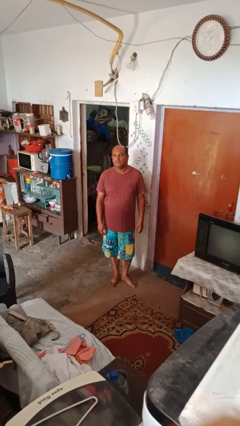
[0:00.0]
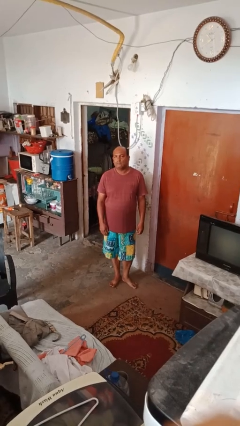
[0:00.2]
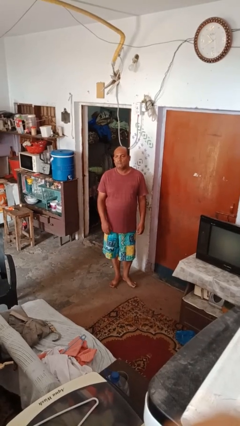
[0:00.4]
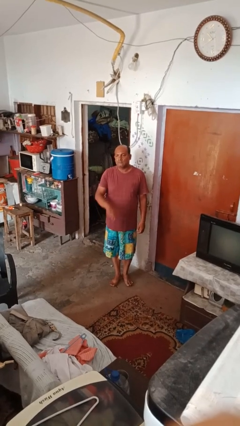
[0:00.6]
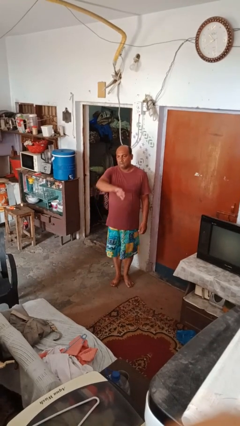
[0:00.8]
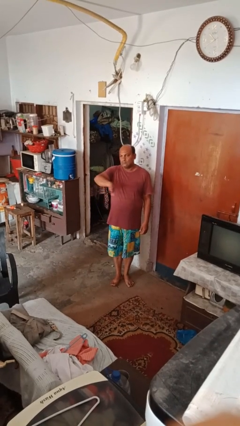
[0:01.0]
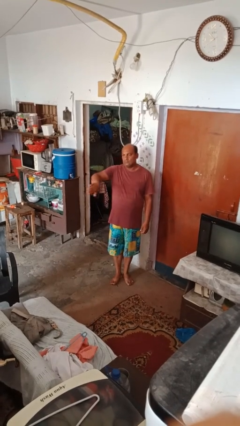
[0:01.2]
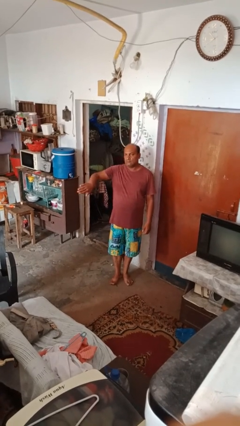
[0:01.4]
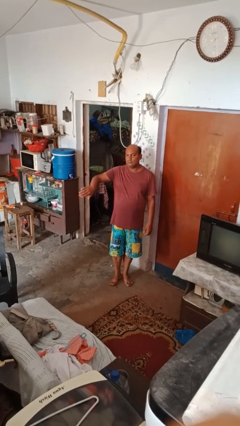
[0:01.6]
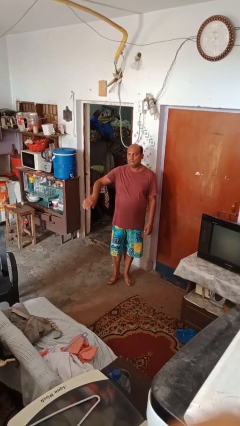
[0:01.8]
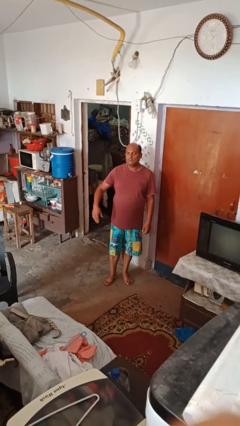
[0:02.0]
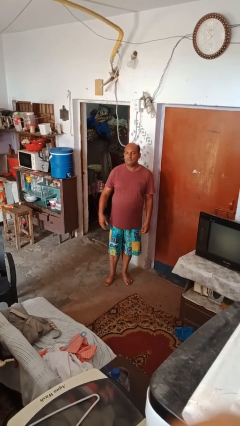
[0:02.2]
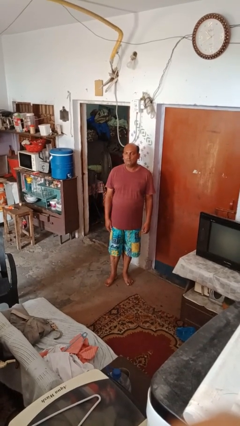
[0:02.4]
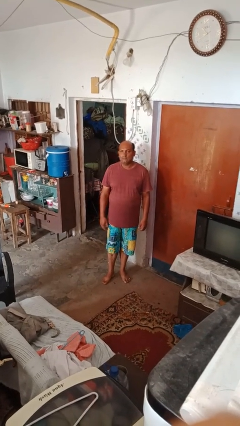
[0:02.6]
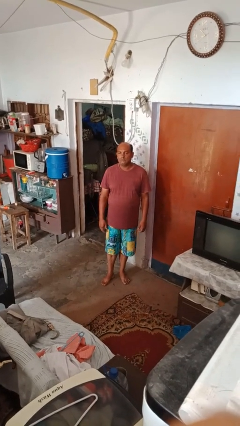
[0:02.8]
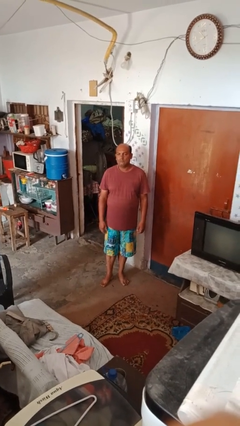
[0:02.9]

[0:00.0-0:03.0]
person gestures swipe left

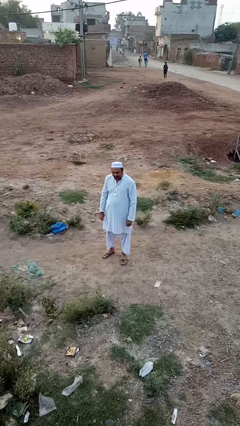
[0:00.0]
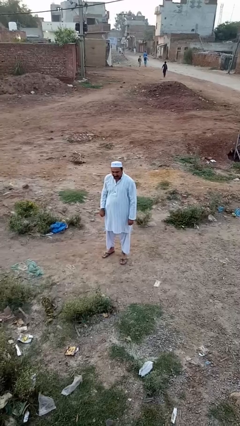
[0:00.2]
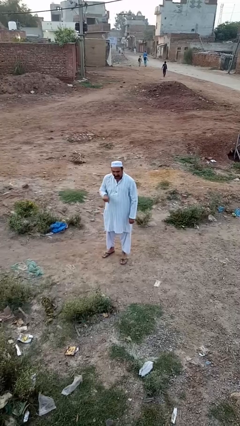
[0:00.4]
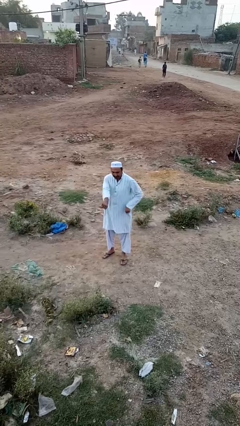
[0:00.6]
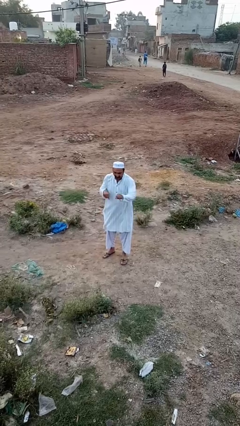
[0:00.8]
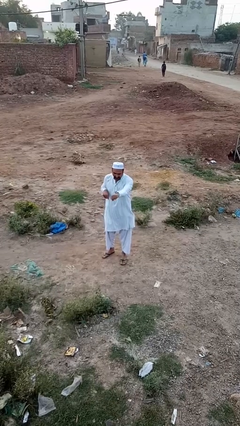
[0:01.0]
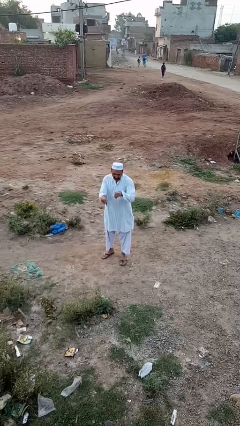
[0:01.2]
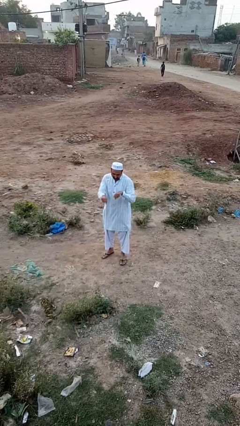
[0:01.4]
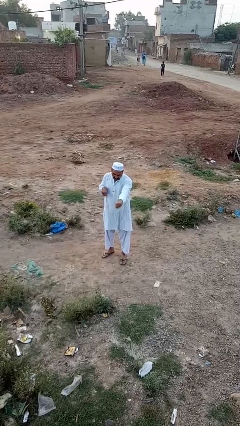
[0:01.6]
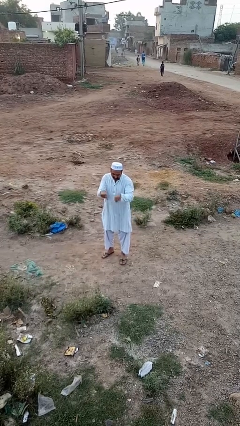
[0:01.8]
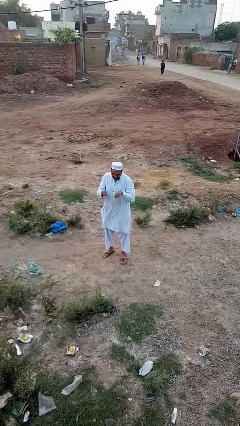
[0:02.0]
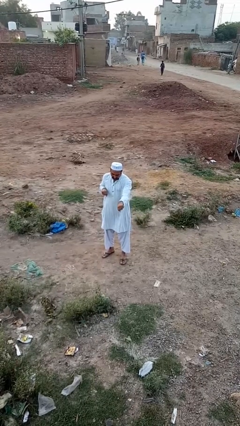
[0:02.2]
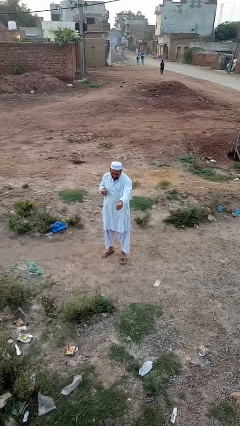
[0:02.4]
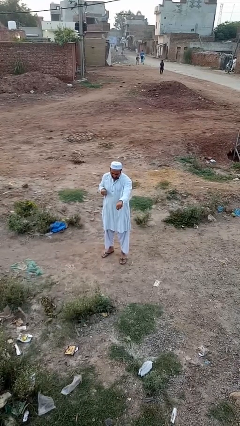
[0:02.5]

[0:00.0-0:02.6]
person punches

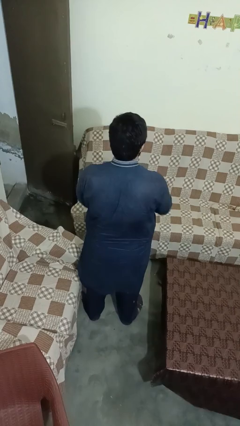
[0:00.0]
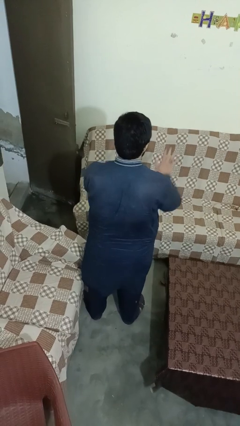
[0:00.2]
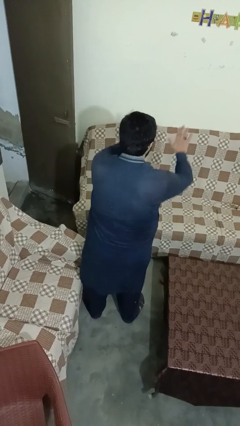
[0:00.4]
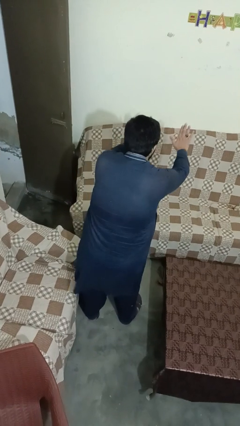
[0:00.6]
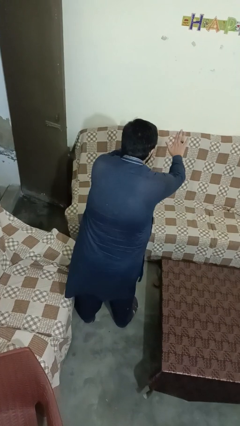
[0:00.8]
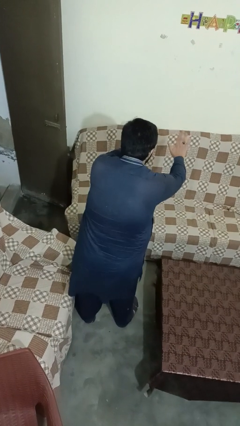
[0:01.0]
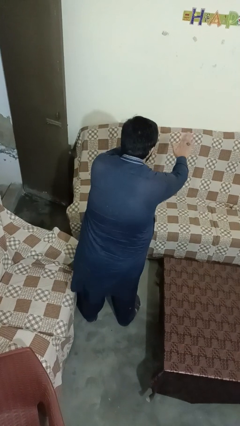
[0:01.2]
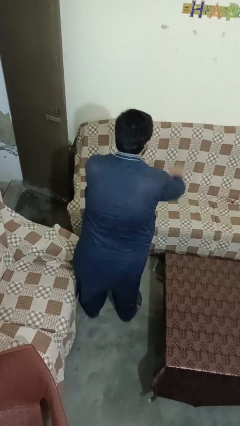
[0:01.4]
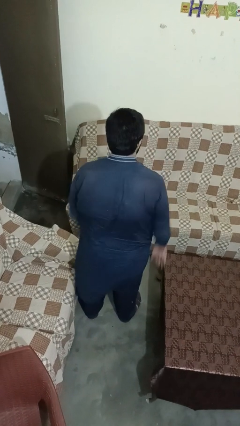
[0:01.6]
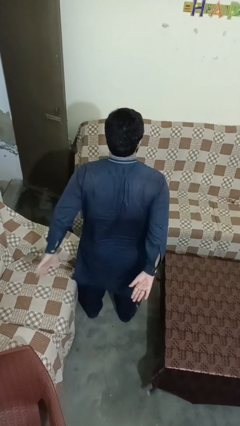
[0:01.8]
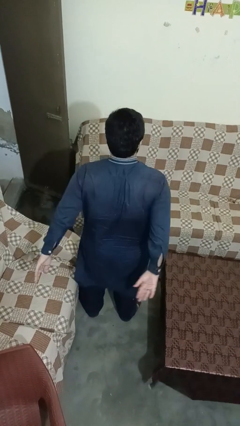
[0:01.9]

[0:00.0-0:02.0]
person gestures stop

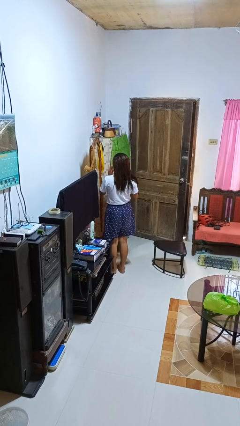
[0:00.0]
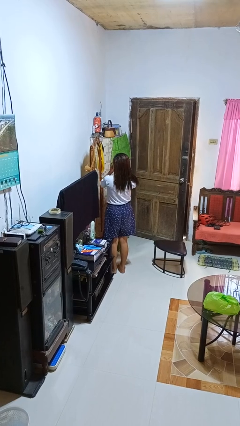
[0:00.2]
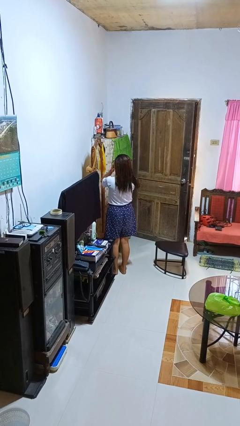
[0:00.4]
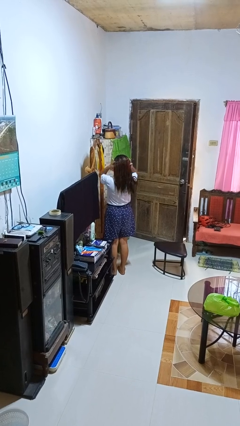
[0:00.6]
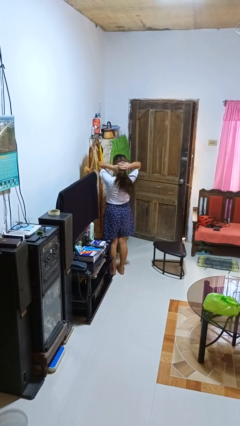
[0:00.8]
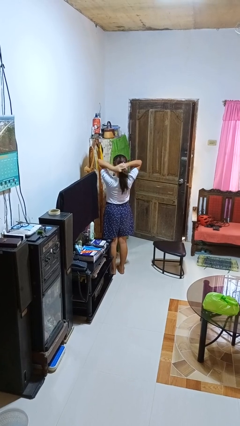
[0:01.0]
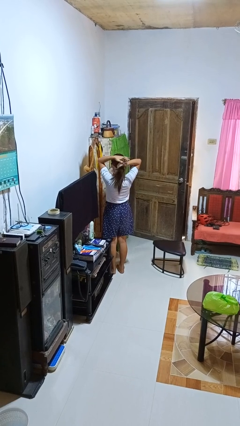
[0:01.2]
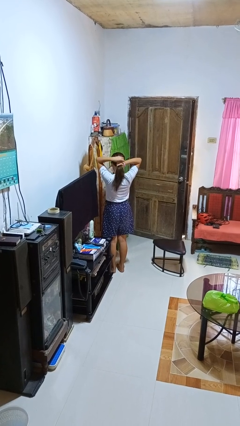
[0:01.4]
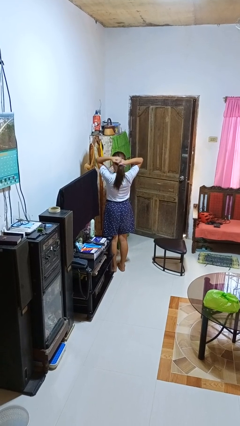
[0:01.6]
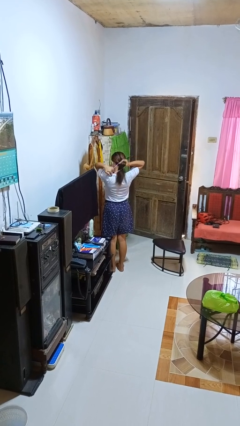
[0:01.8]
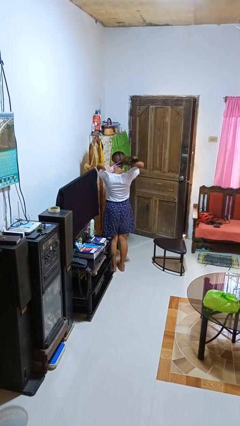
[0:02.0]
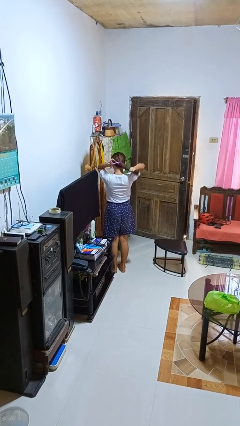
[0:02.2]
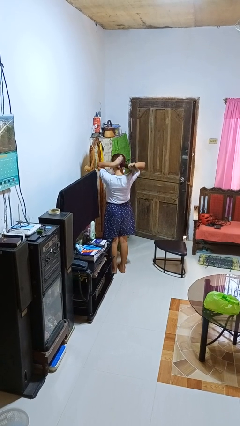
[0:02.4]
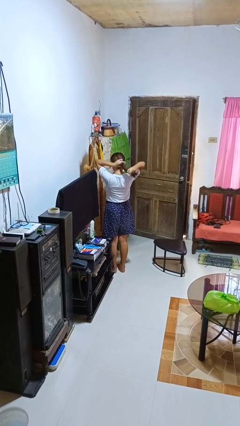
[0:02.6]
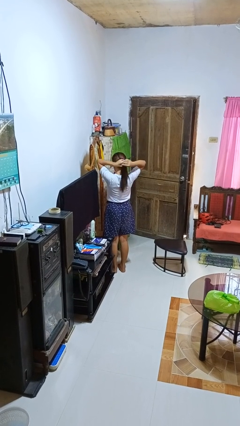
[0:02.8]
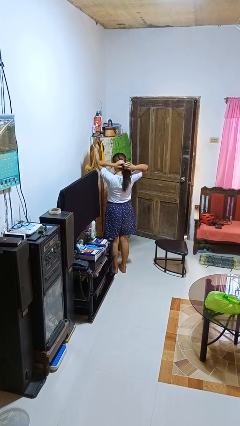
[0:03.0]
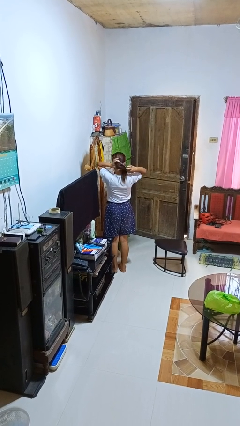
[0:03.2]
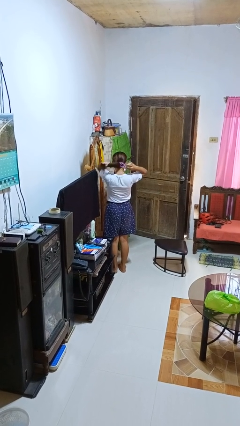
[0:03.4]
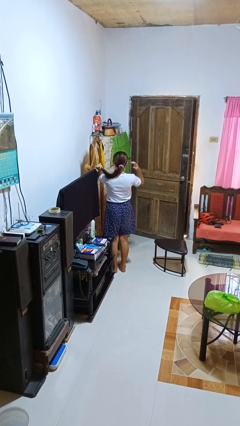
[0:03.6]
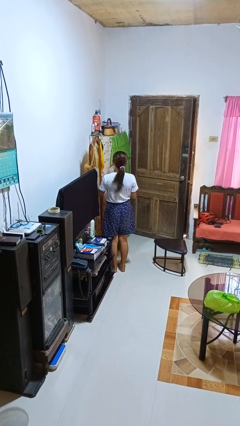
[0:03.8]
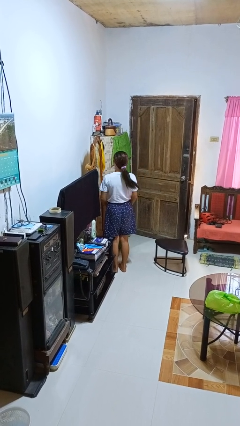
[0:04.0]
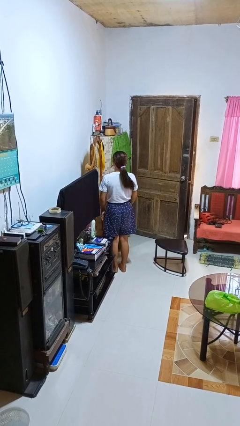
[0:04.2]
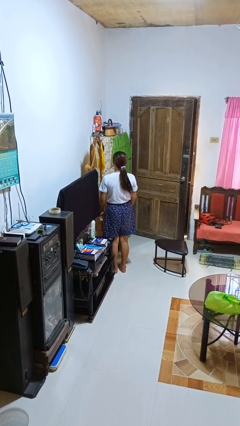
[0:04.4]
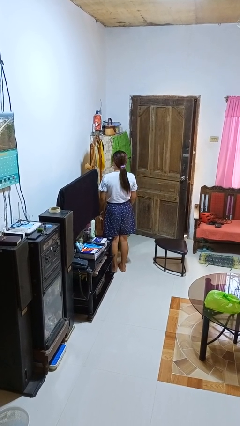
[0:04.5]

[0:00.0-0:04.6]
person puts hair in ponytail

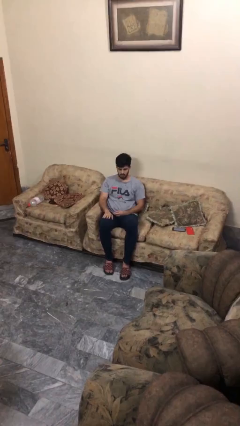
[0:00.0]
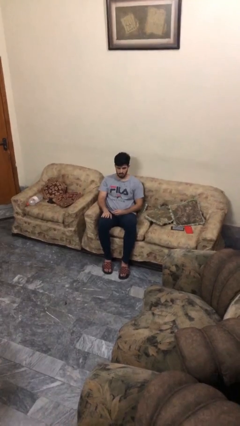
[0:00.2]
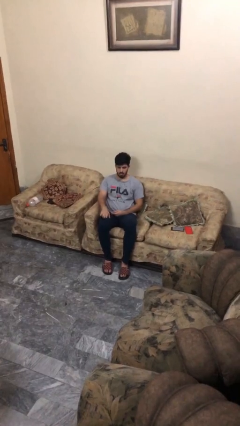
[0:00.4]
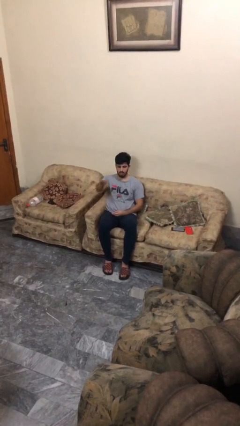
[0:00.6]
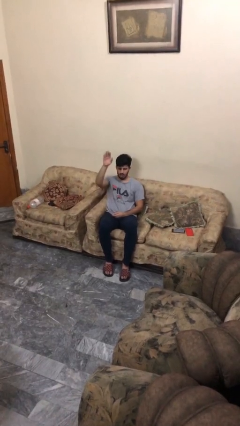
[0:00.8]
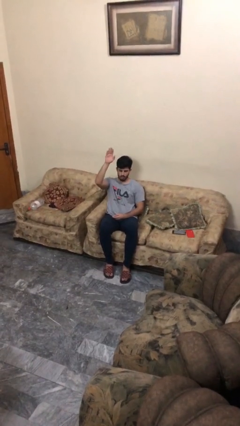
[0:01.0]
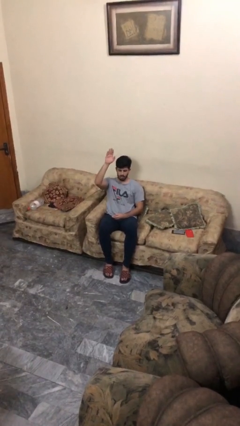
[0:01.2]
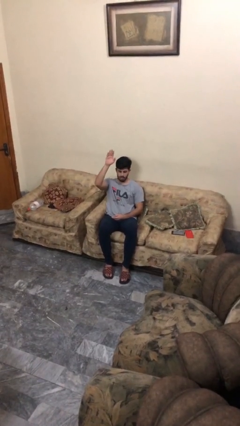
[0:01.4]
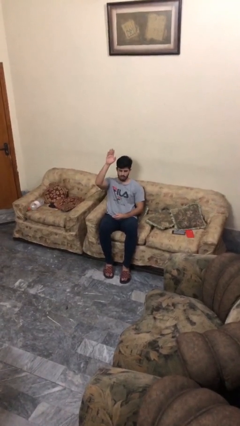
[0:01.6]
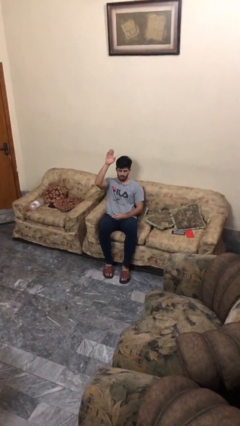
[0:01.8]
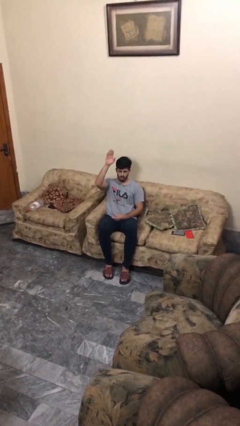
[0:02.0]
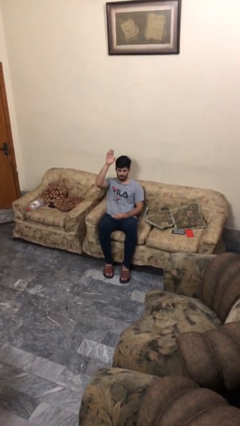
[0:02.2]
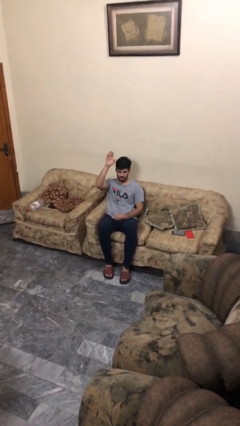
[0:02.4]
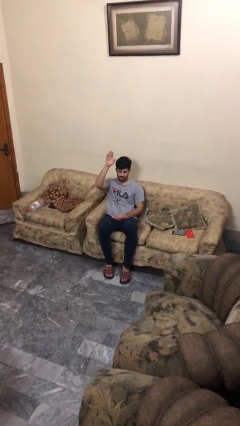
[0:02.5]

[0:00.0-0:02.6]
person gestures raise hand

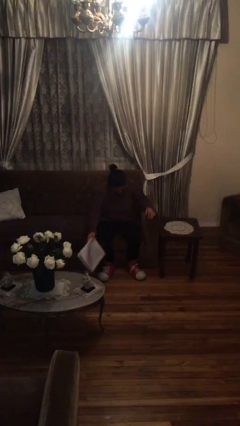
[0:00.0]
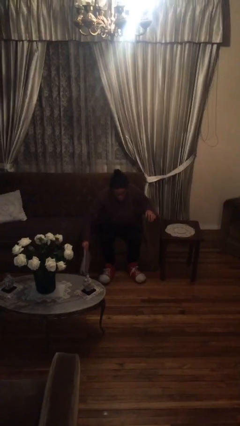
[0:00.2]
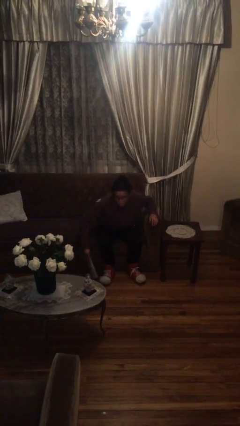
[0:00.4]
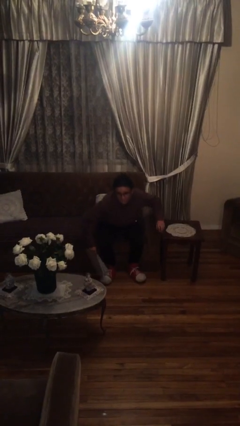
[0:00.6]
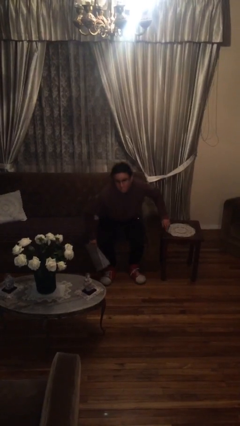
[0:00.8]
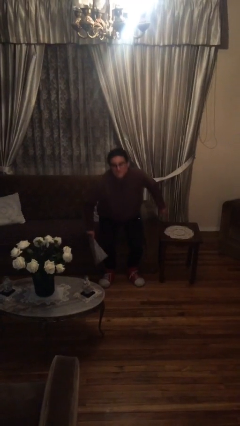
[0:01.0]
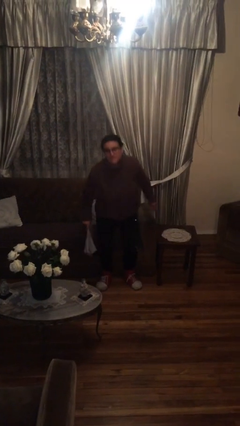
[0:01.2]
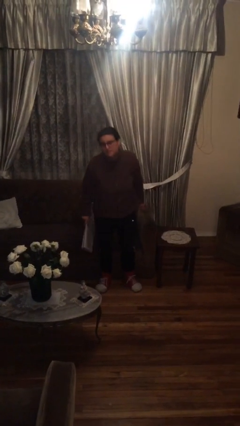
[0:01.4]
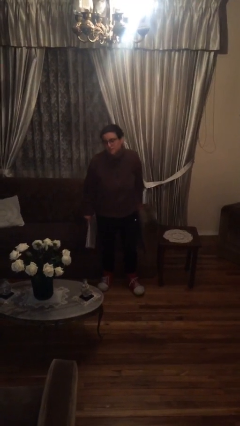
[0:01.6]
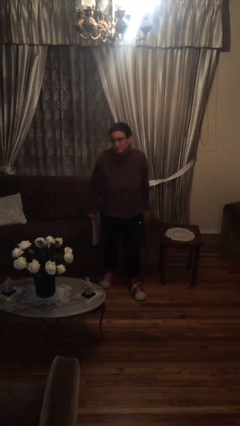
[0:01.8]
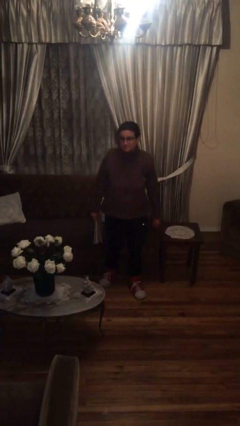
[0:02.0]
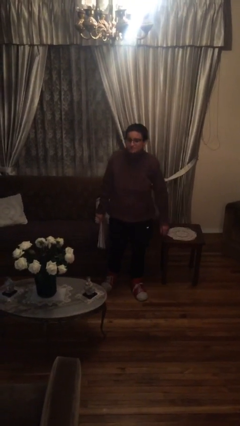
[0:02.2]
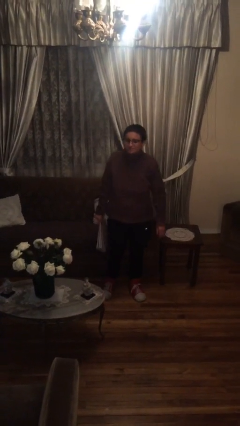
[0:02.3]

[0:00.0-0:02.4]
person stands up

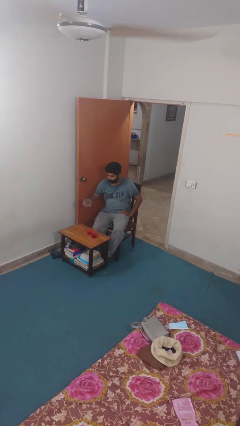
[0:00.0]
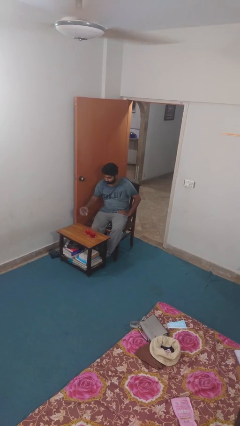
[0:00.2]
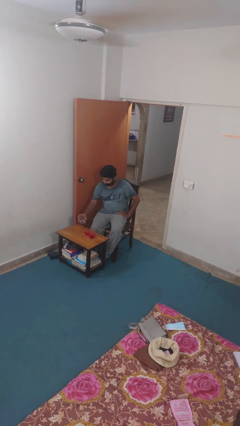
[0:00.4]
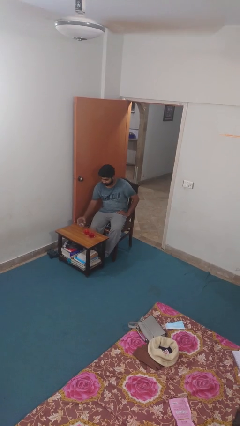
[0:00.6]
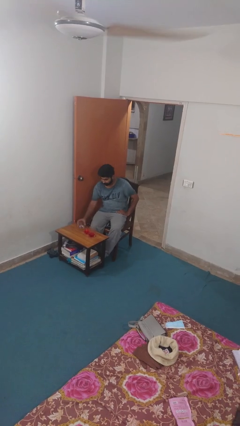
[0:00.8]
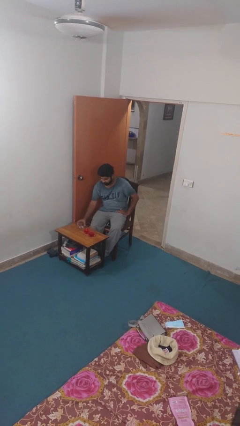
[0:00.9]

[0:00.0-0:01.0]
person puts down object on table
